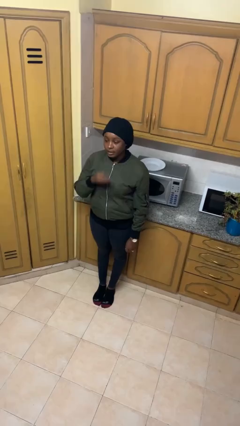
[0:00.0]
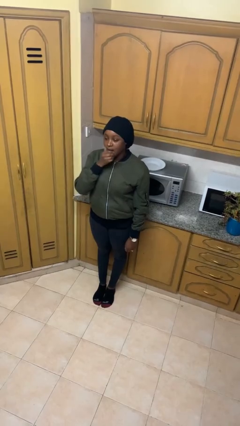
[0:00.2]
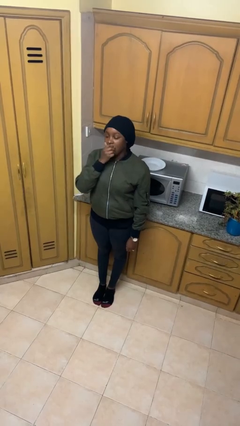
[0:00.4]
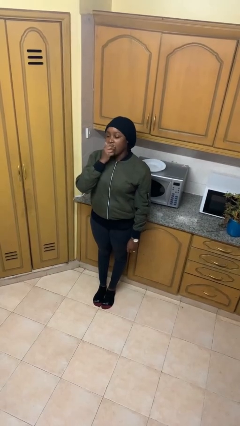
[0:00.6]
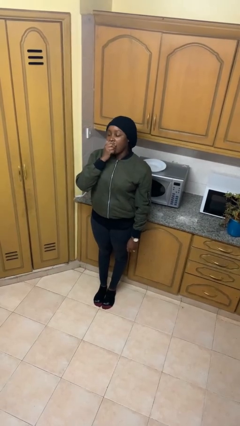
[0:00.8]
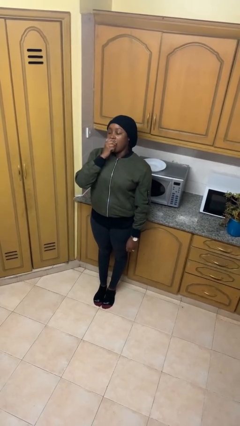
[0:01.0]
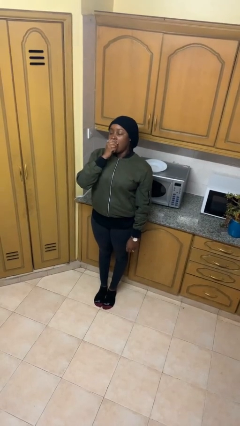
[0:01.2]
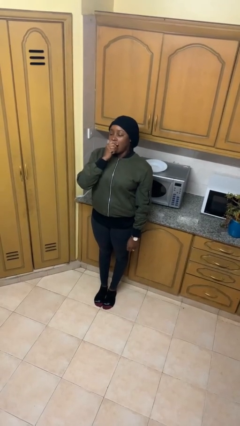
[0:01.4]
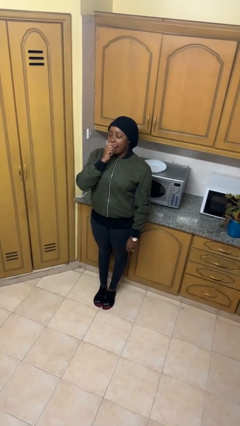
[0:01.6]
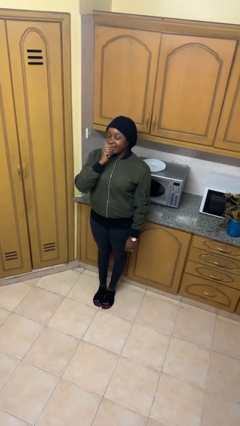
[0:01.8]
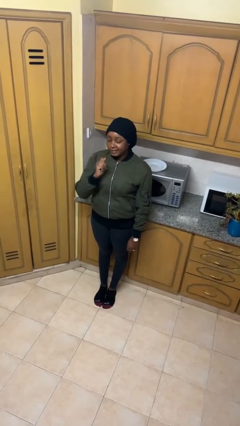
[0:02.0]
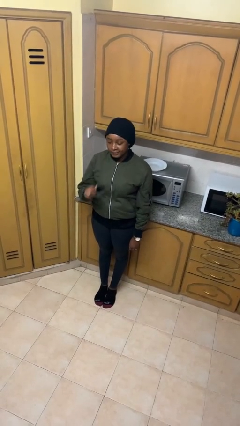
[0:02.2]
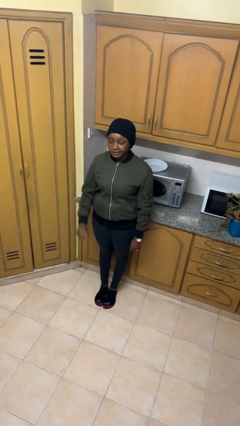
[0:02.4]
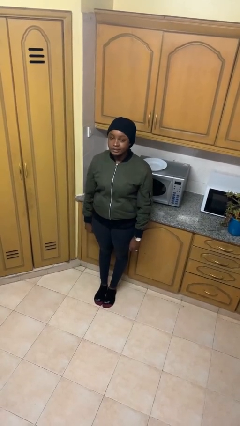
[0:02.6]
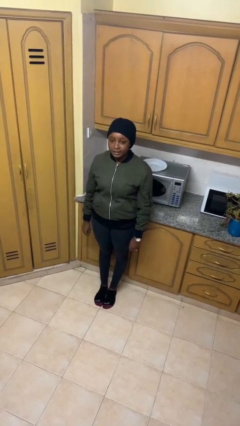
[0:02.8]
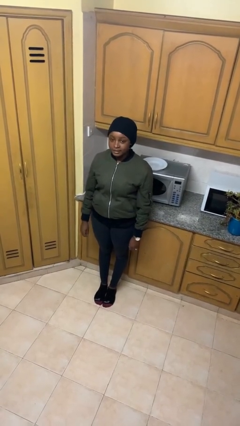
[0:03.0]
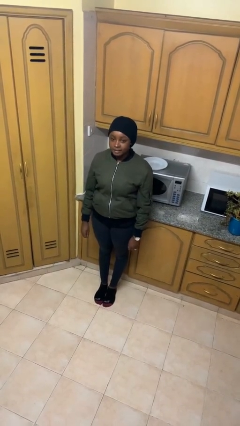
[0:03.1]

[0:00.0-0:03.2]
person yawns

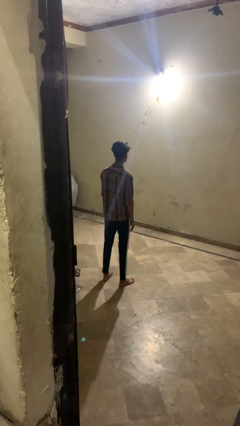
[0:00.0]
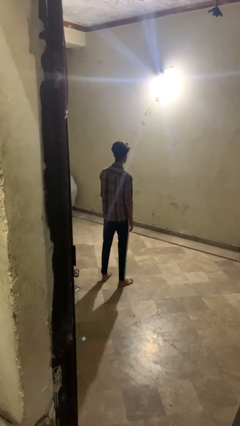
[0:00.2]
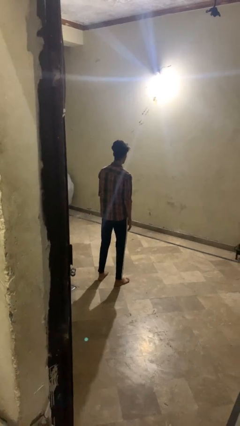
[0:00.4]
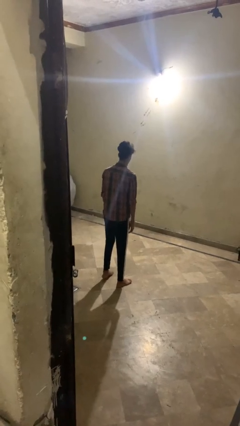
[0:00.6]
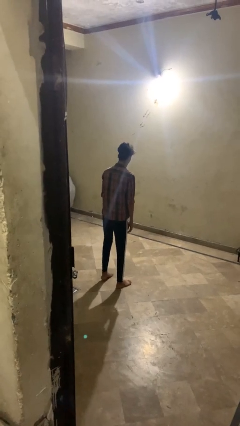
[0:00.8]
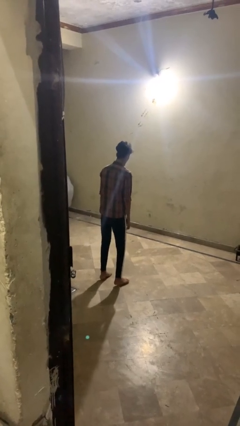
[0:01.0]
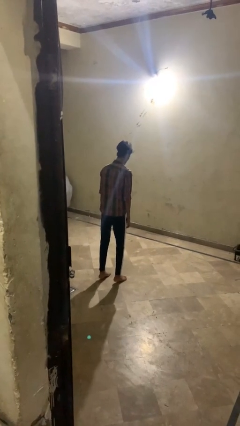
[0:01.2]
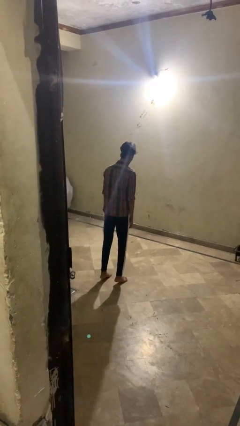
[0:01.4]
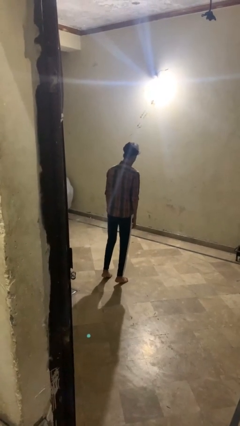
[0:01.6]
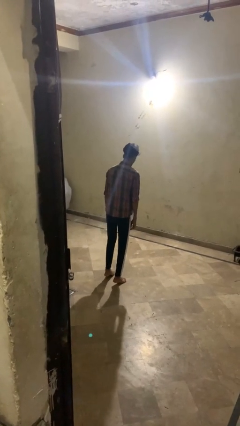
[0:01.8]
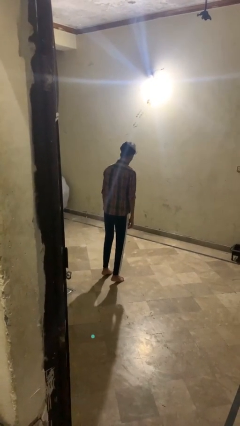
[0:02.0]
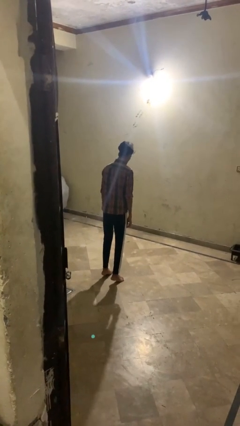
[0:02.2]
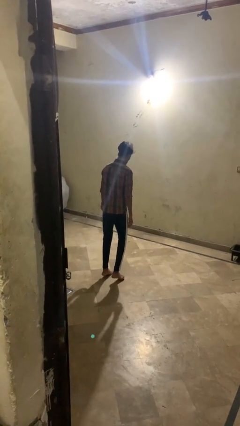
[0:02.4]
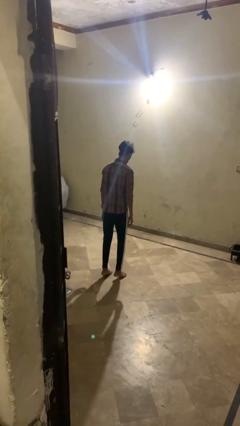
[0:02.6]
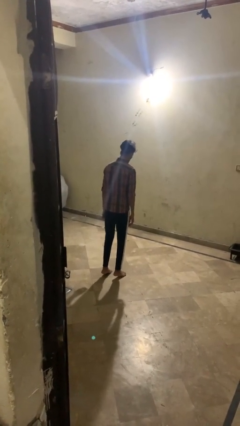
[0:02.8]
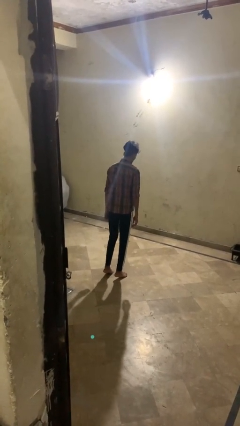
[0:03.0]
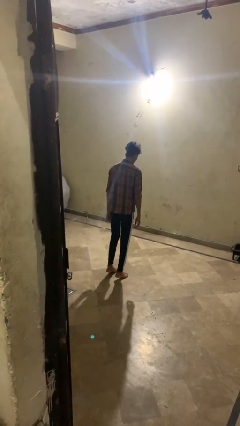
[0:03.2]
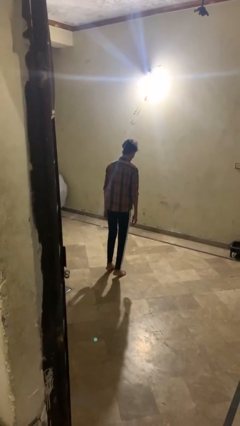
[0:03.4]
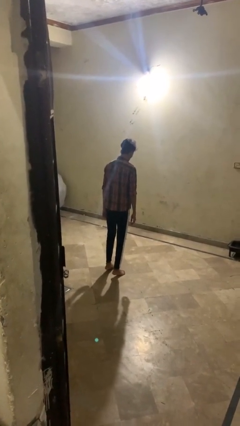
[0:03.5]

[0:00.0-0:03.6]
person walks tiptoe

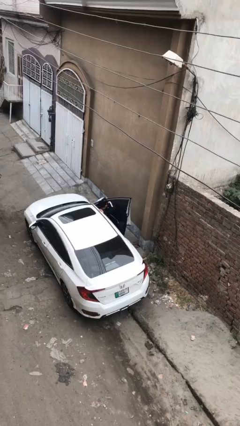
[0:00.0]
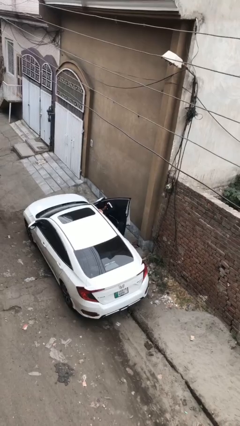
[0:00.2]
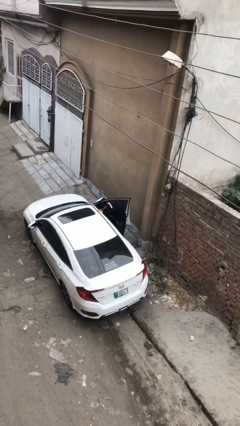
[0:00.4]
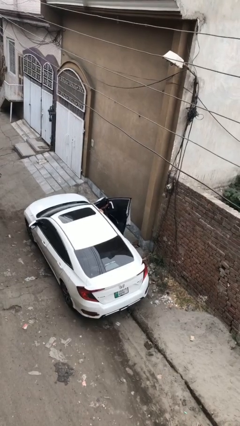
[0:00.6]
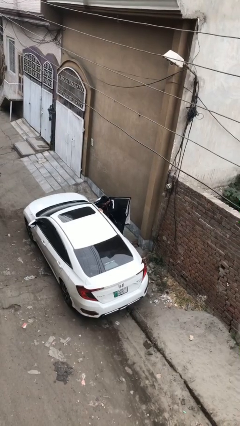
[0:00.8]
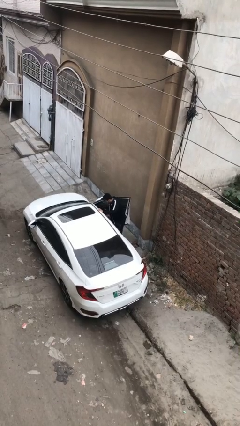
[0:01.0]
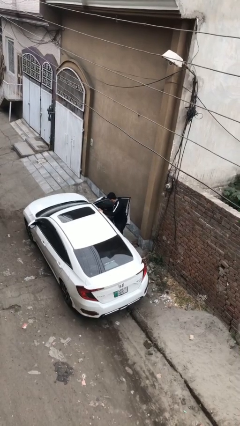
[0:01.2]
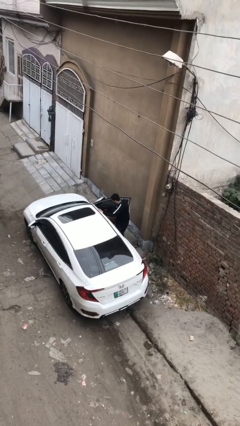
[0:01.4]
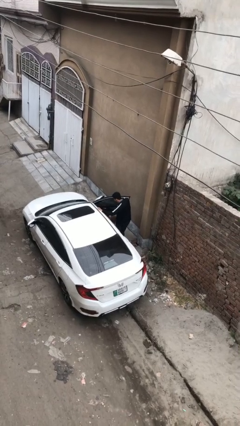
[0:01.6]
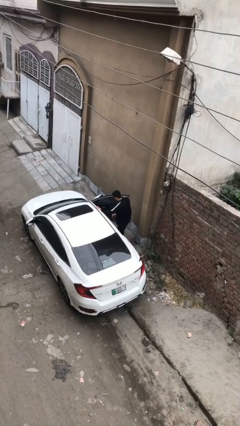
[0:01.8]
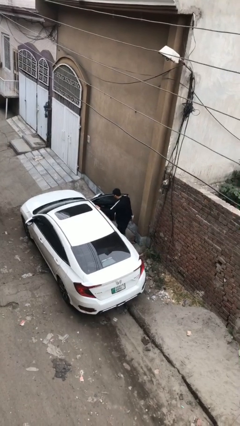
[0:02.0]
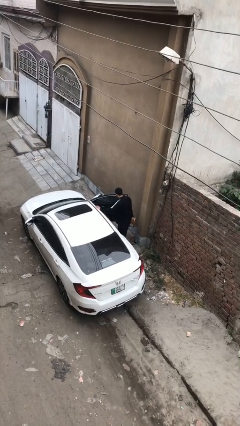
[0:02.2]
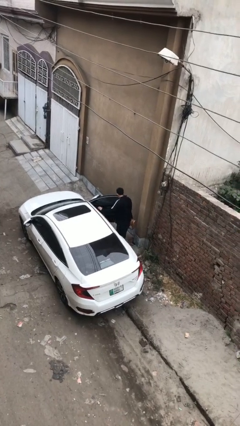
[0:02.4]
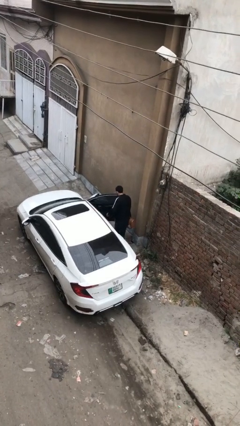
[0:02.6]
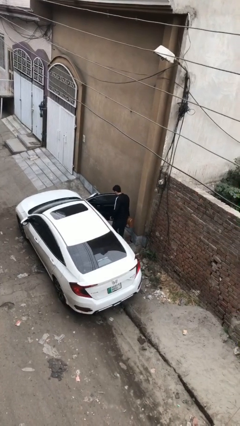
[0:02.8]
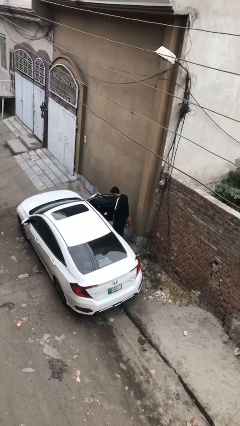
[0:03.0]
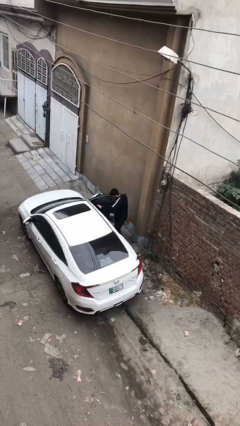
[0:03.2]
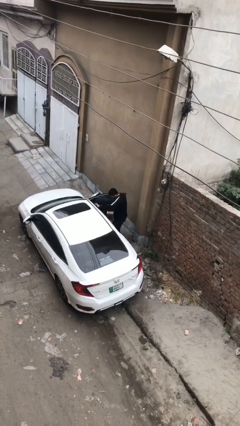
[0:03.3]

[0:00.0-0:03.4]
person unloads car

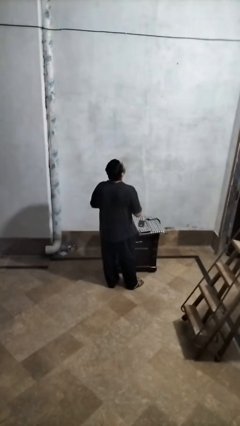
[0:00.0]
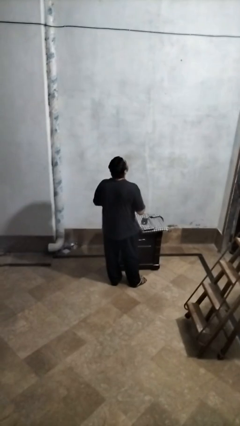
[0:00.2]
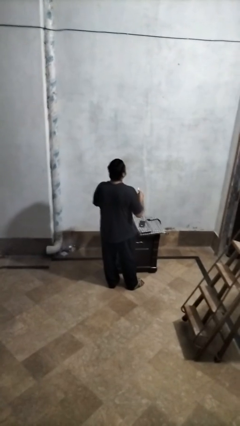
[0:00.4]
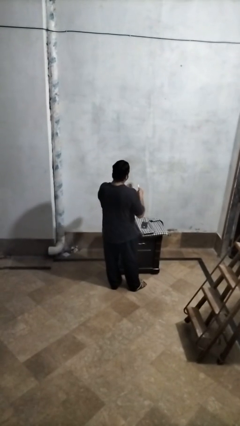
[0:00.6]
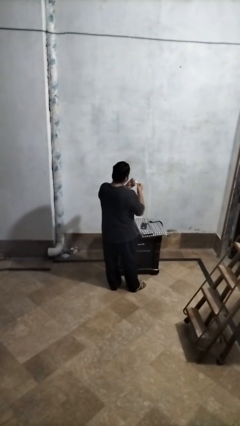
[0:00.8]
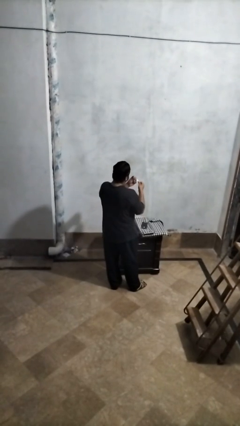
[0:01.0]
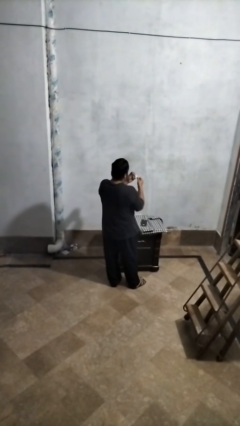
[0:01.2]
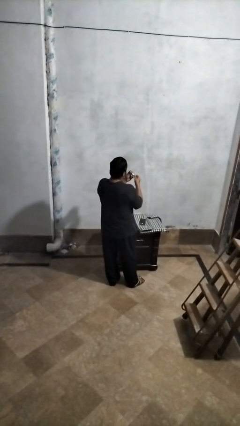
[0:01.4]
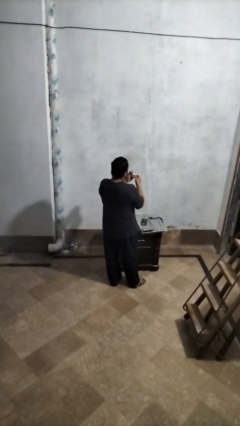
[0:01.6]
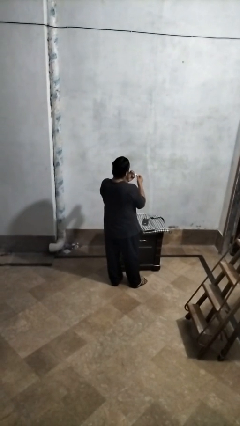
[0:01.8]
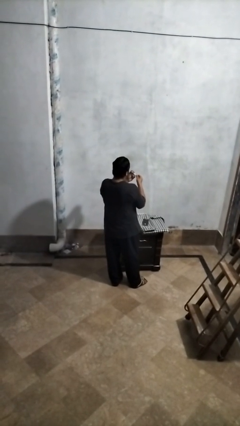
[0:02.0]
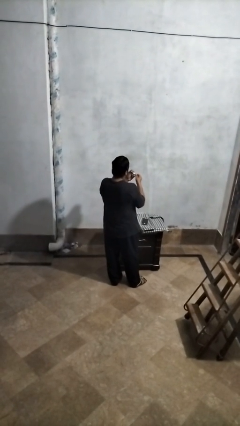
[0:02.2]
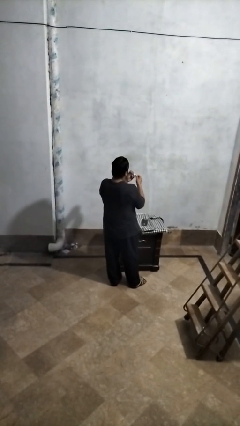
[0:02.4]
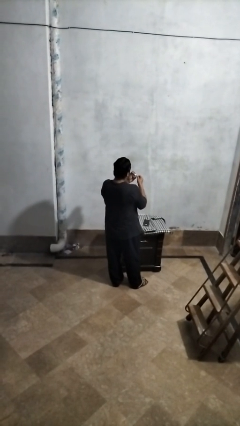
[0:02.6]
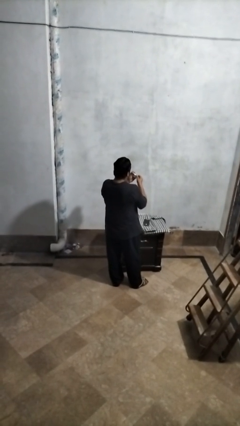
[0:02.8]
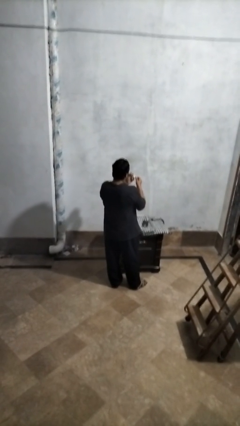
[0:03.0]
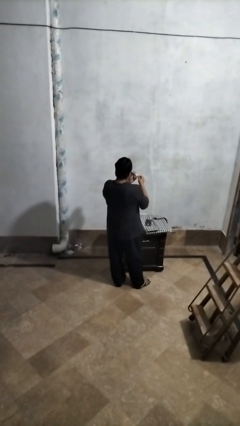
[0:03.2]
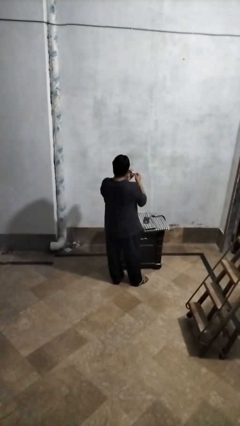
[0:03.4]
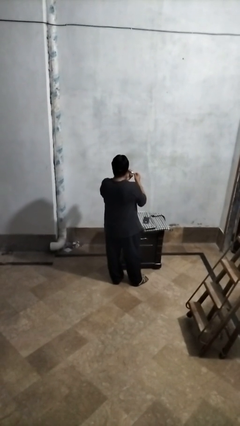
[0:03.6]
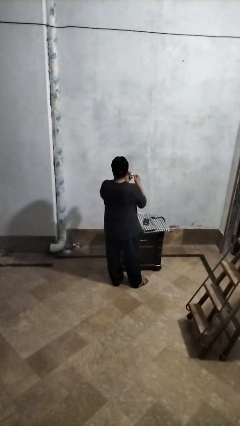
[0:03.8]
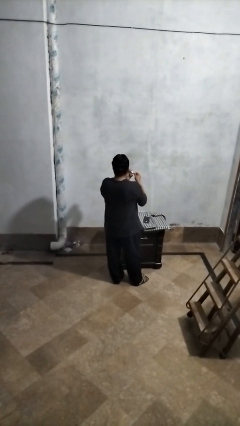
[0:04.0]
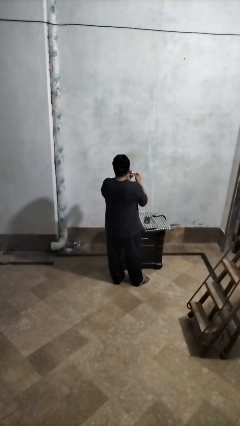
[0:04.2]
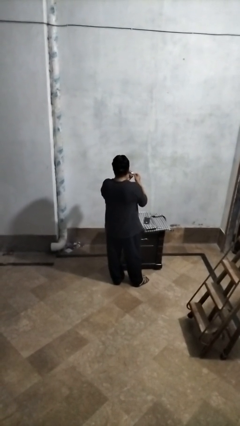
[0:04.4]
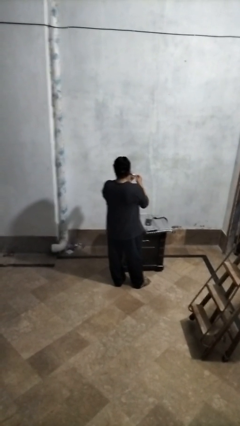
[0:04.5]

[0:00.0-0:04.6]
person files fingernails

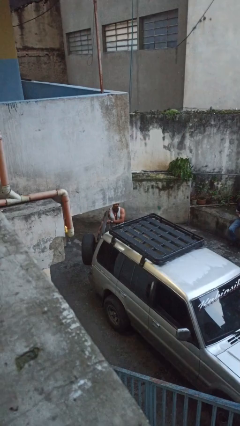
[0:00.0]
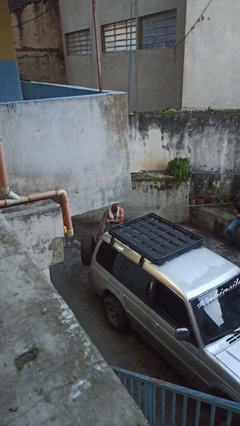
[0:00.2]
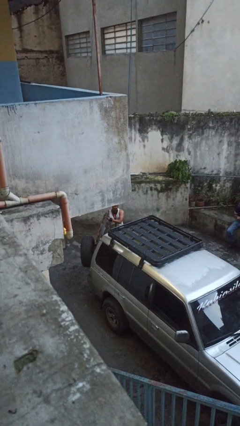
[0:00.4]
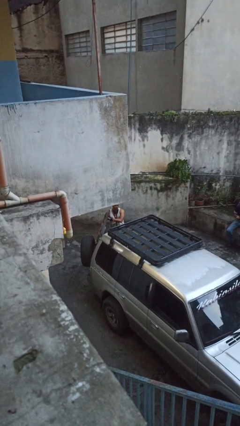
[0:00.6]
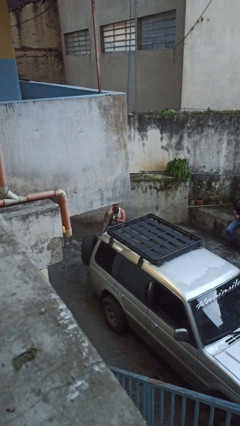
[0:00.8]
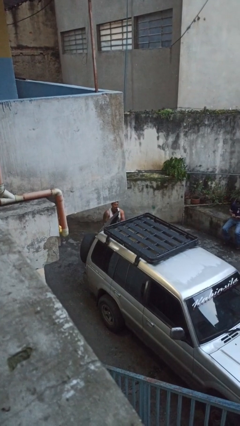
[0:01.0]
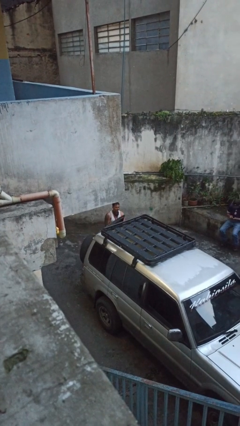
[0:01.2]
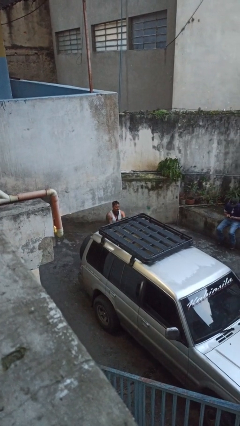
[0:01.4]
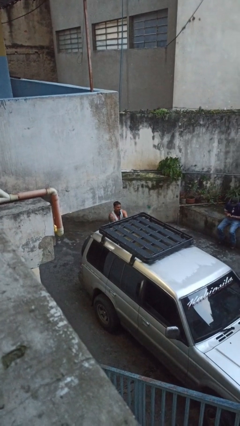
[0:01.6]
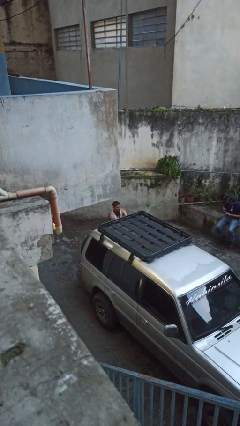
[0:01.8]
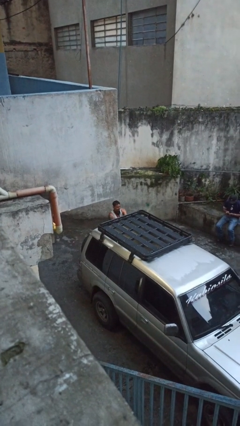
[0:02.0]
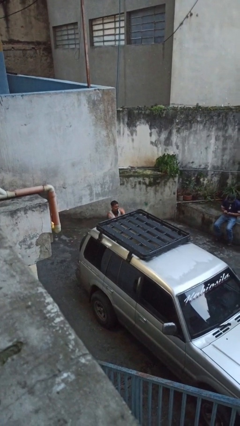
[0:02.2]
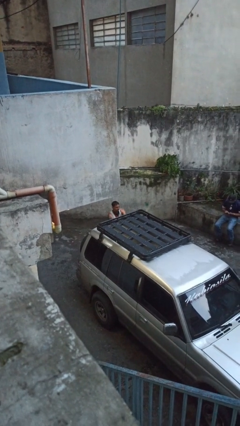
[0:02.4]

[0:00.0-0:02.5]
person closes car trunk

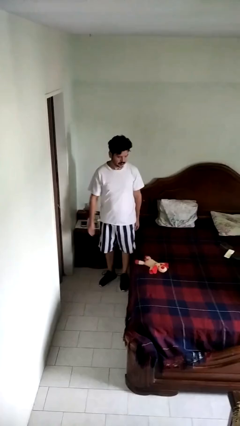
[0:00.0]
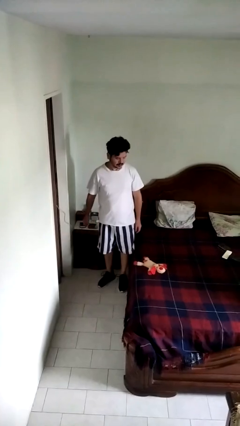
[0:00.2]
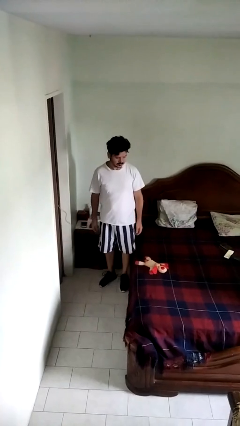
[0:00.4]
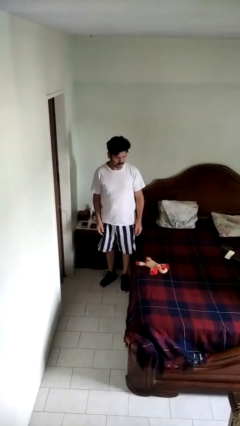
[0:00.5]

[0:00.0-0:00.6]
person throws object on bed
